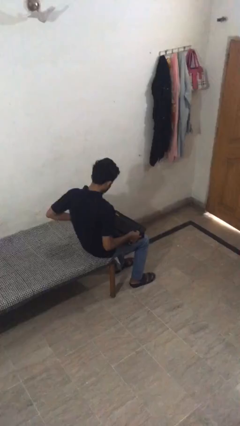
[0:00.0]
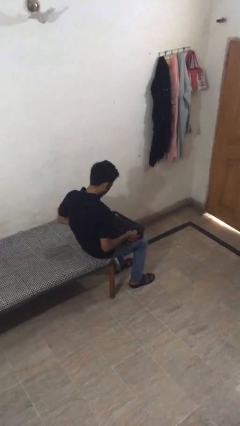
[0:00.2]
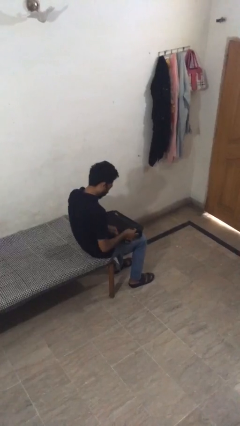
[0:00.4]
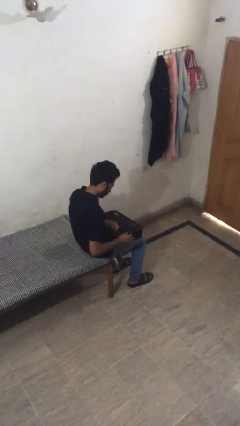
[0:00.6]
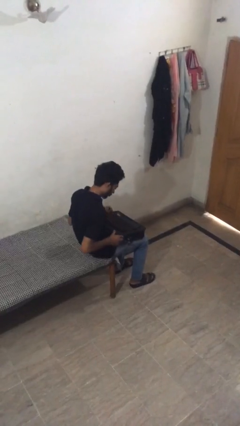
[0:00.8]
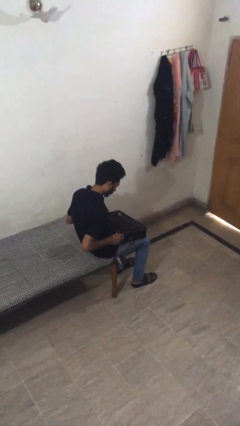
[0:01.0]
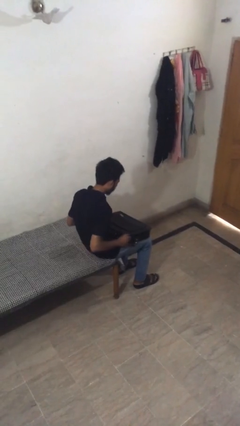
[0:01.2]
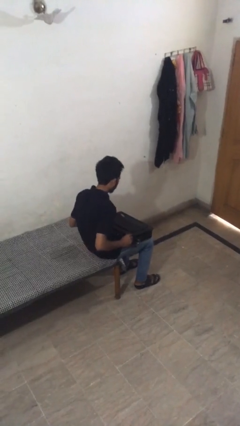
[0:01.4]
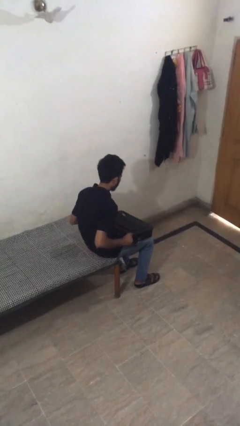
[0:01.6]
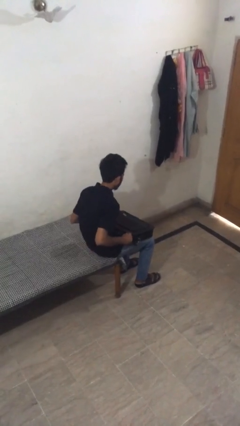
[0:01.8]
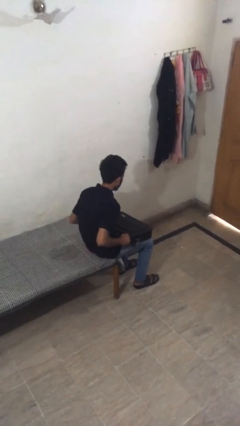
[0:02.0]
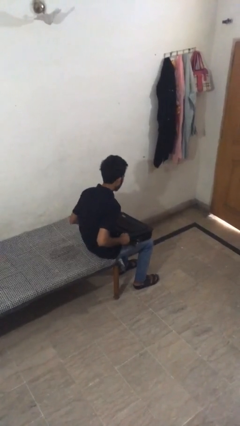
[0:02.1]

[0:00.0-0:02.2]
person closes suitcase

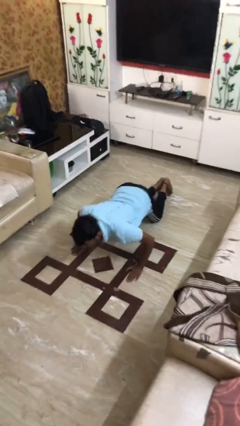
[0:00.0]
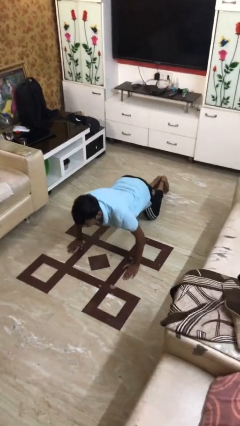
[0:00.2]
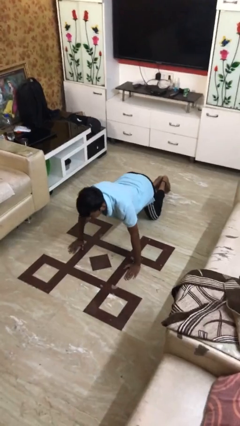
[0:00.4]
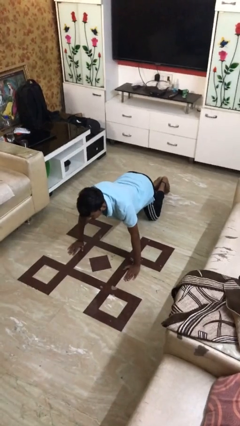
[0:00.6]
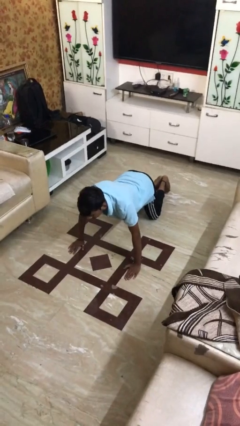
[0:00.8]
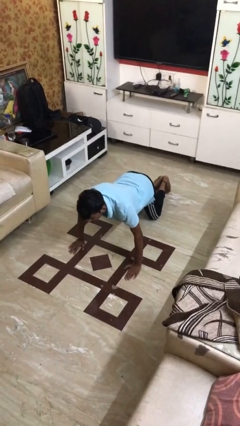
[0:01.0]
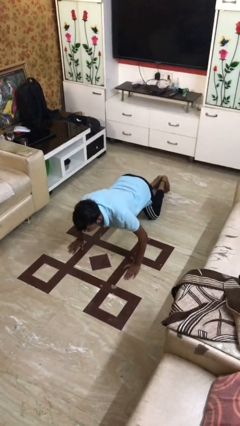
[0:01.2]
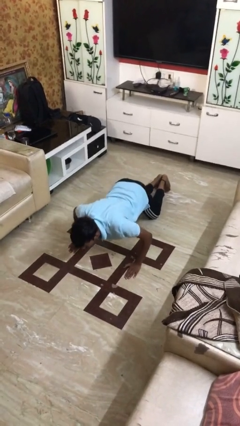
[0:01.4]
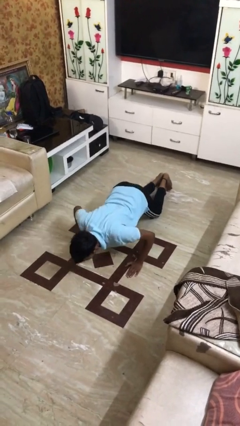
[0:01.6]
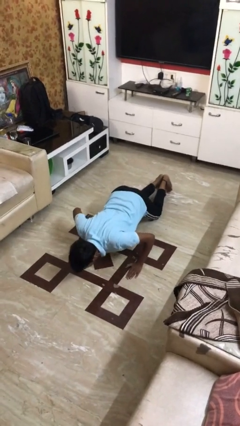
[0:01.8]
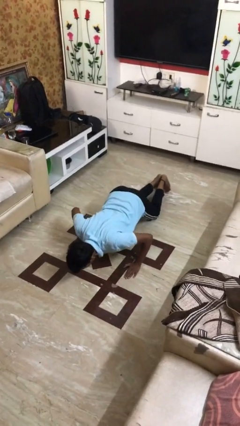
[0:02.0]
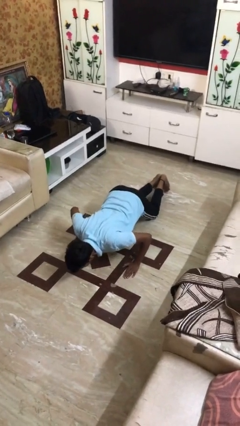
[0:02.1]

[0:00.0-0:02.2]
person exercises with pushup

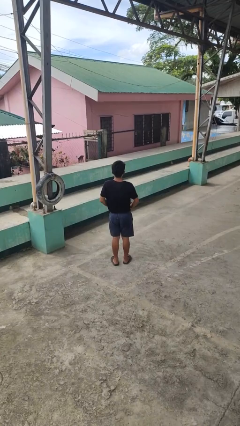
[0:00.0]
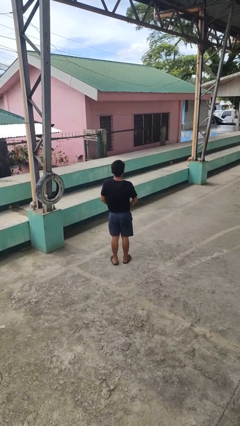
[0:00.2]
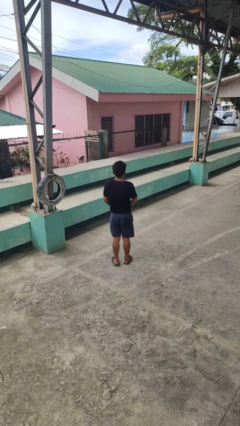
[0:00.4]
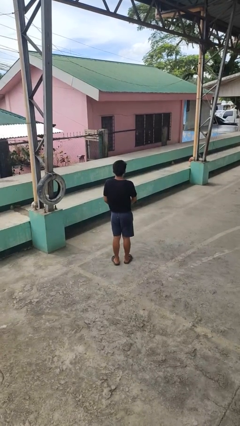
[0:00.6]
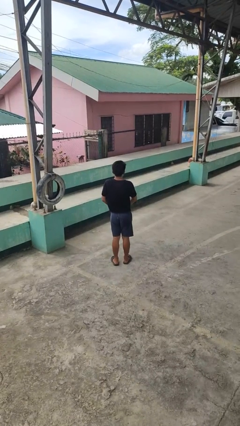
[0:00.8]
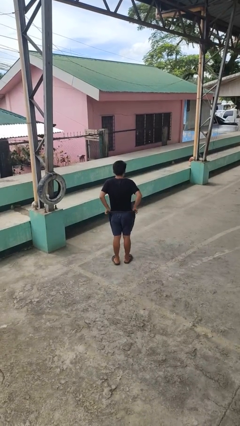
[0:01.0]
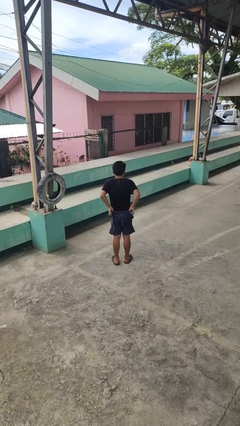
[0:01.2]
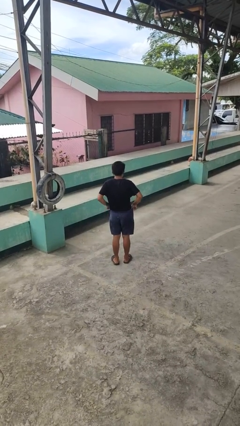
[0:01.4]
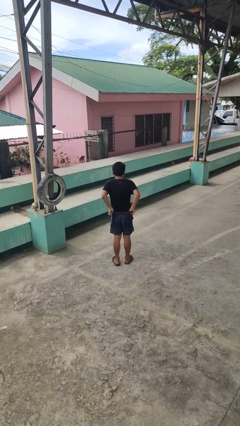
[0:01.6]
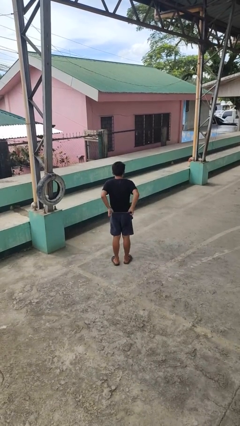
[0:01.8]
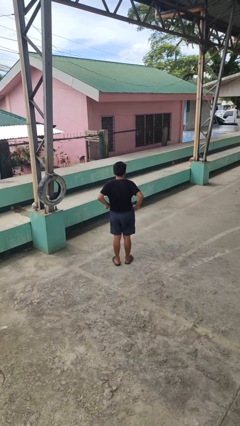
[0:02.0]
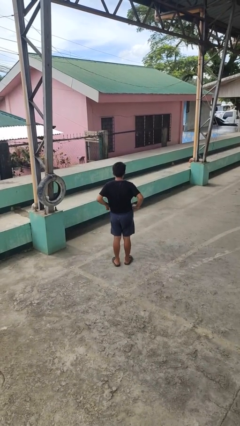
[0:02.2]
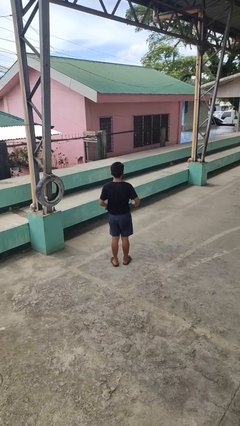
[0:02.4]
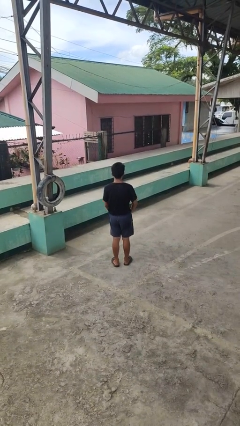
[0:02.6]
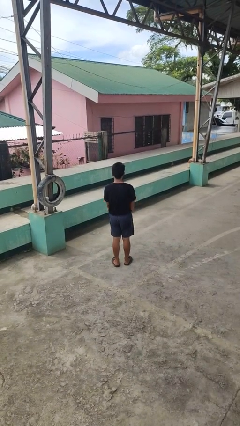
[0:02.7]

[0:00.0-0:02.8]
person hikes up pants

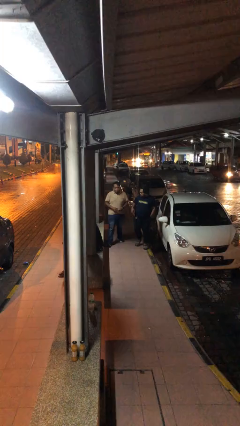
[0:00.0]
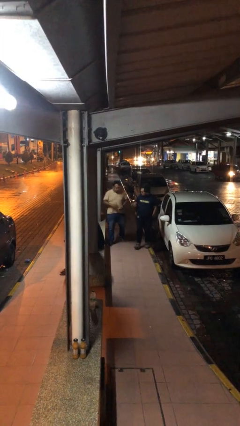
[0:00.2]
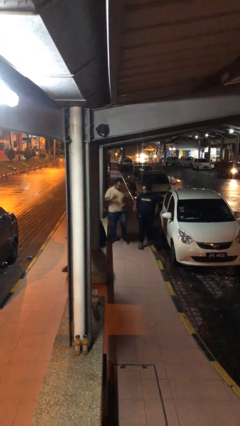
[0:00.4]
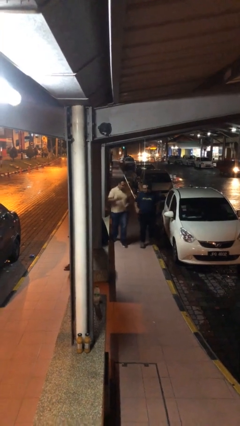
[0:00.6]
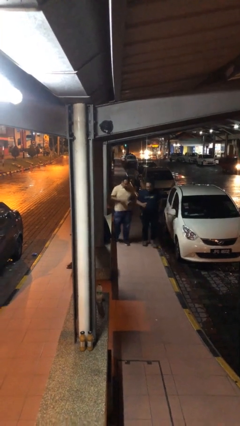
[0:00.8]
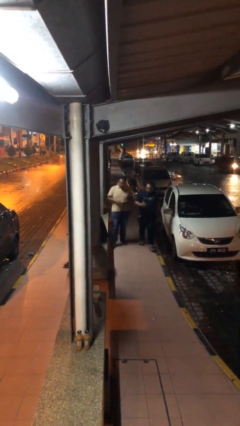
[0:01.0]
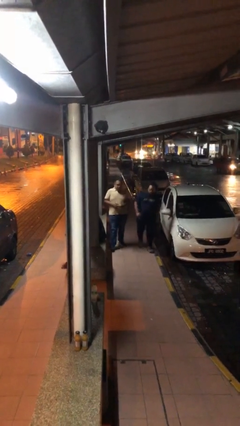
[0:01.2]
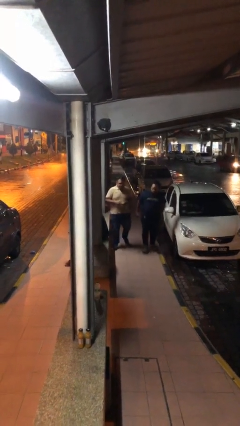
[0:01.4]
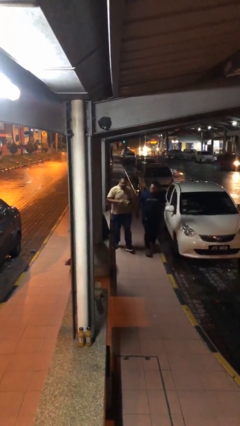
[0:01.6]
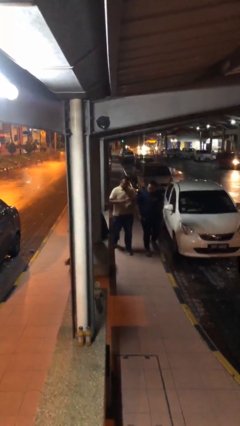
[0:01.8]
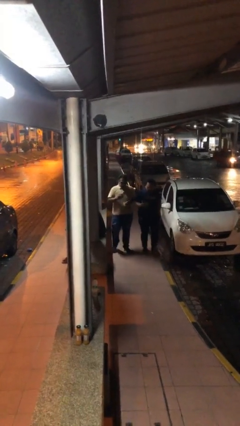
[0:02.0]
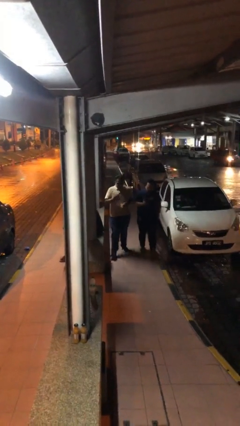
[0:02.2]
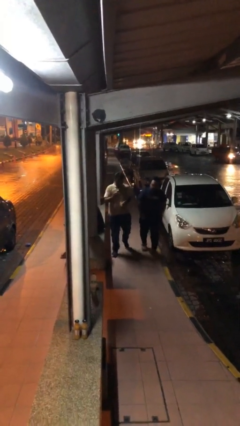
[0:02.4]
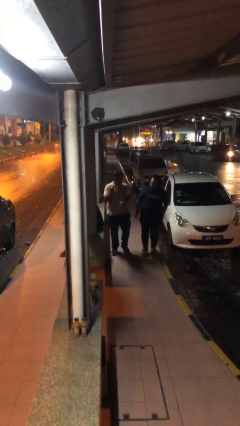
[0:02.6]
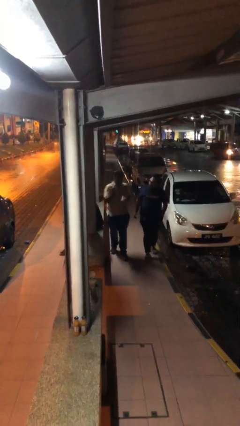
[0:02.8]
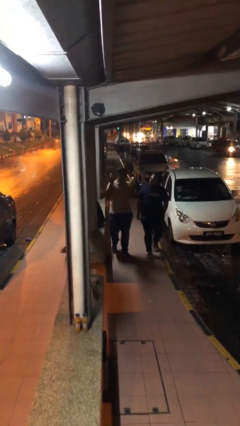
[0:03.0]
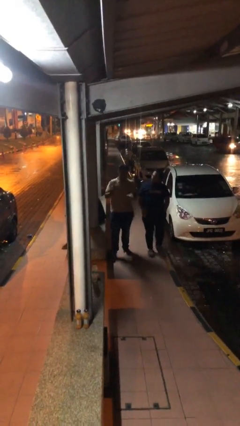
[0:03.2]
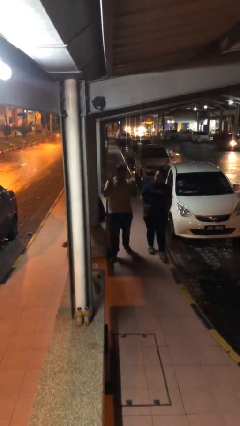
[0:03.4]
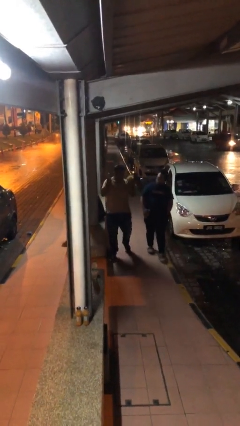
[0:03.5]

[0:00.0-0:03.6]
person talks to person

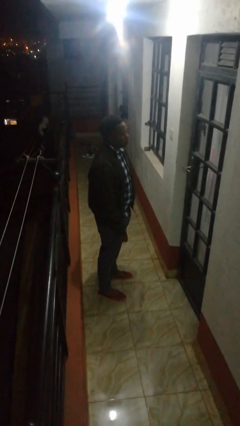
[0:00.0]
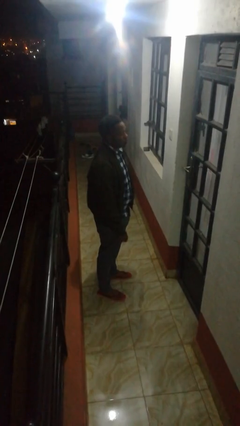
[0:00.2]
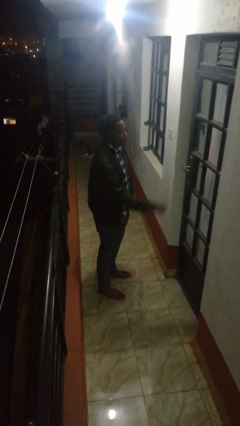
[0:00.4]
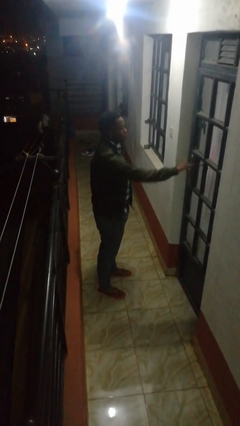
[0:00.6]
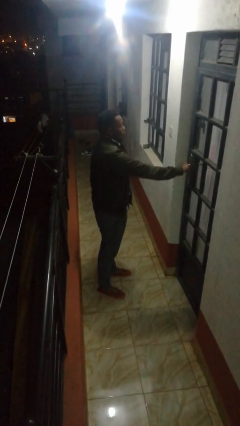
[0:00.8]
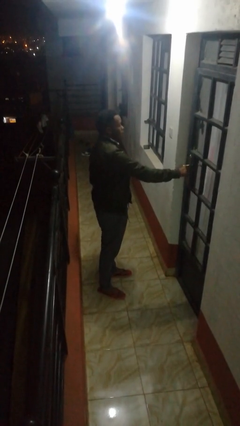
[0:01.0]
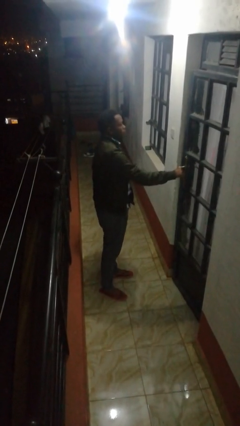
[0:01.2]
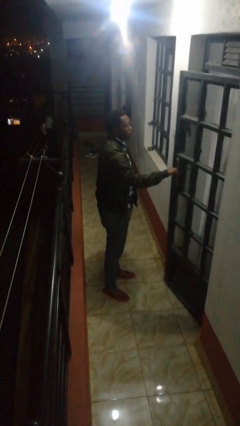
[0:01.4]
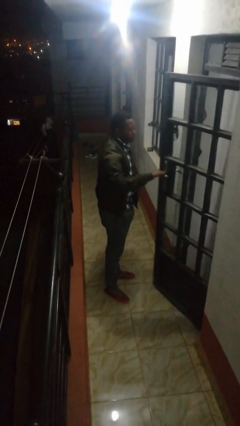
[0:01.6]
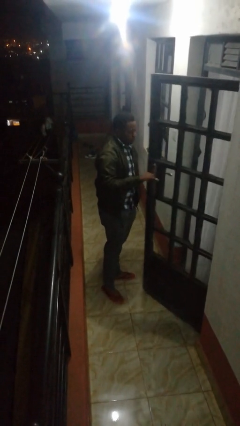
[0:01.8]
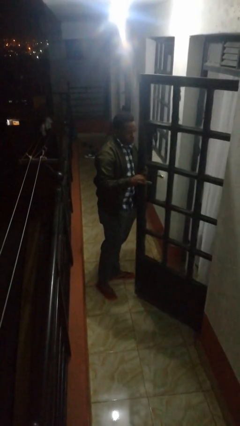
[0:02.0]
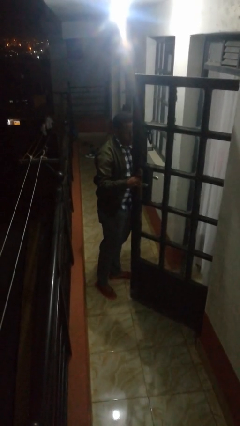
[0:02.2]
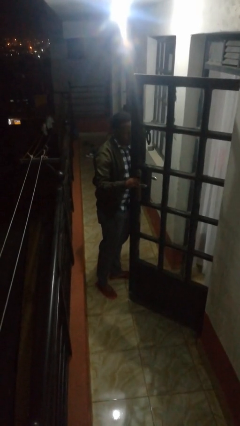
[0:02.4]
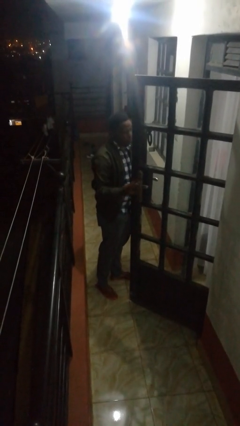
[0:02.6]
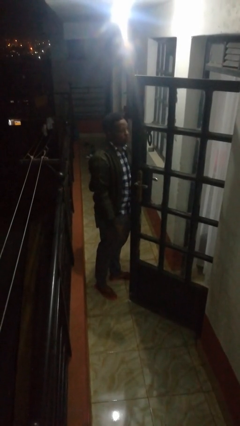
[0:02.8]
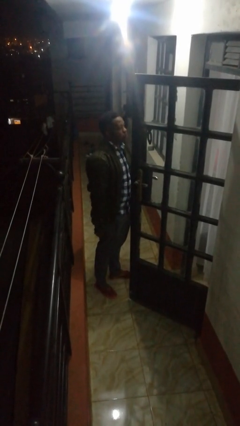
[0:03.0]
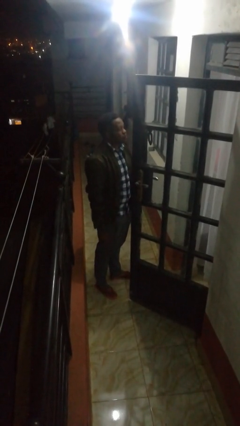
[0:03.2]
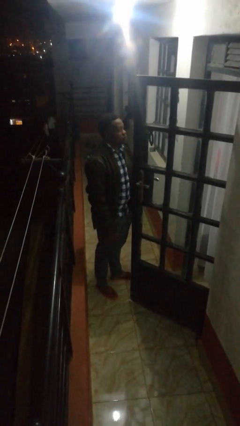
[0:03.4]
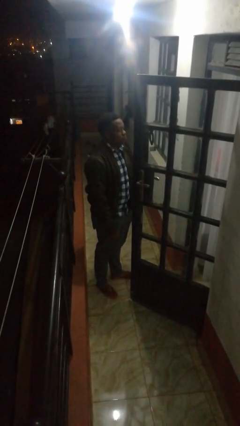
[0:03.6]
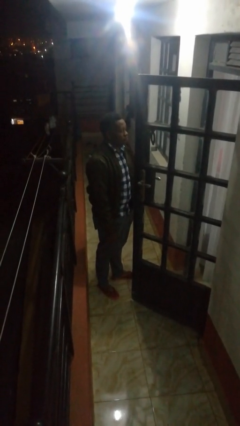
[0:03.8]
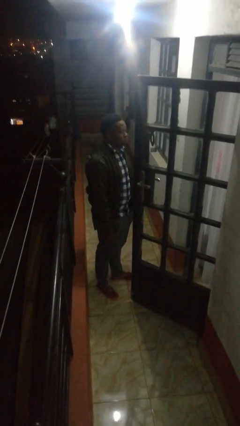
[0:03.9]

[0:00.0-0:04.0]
person opens facility door

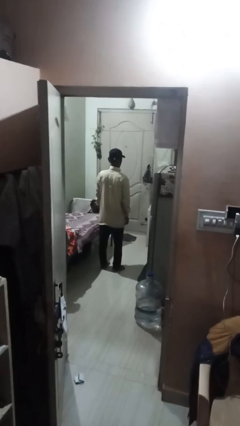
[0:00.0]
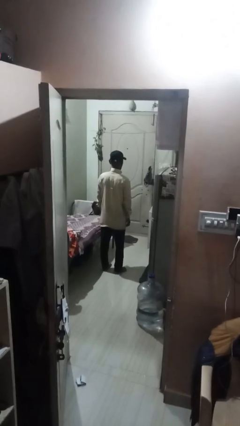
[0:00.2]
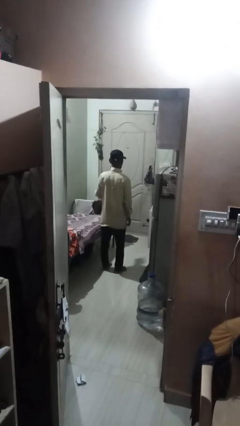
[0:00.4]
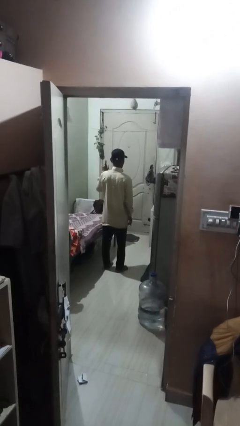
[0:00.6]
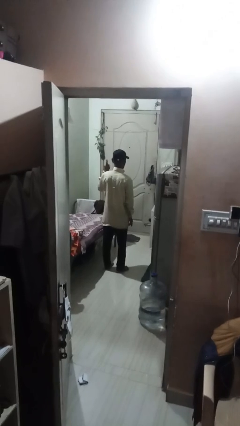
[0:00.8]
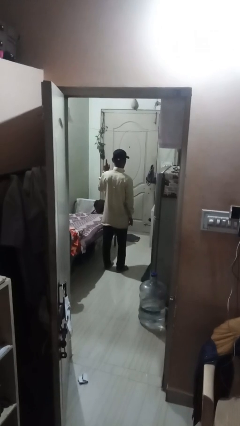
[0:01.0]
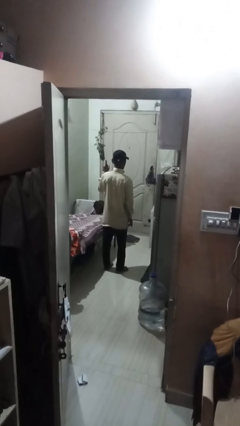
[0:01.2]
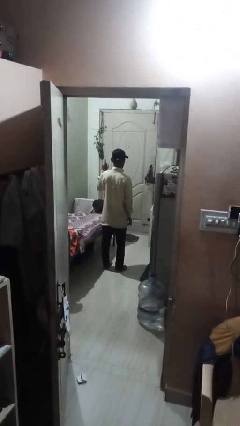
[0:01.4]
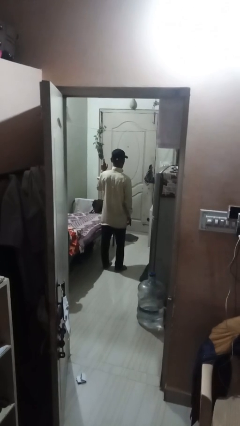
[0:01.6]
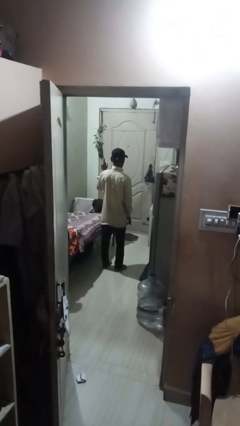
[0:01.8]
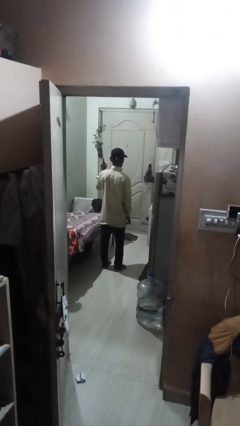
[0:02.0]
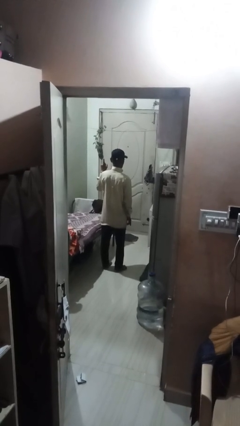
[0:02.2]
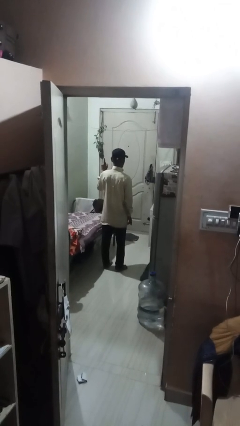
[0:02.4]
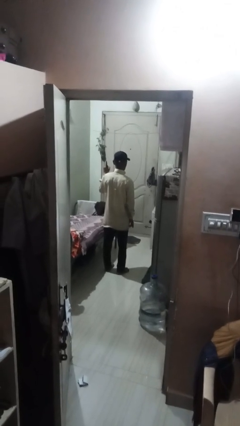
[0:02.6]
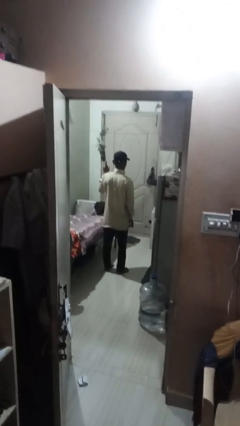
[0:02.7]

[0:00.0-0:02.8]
person gestures number one

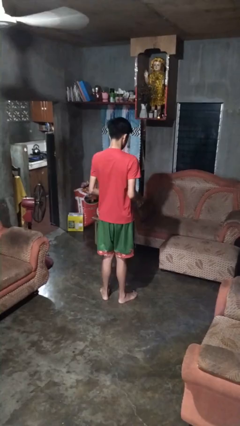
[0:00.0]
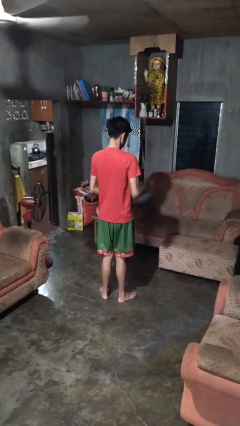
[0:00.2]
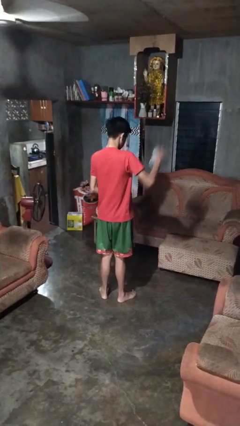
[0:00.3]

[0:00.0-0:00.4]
person bounces ball on floor
